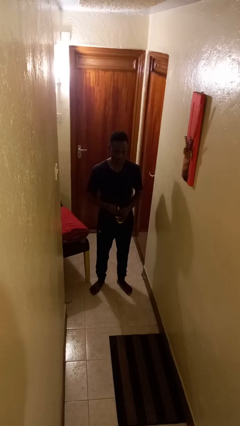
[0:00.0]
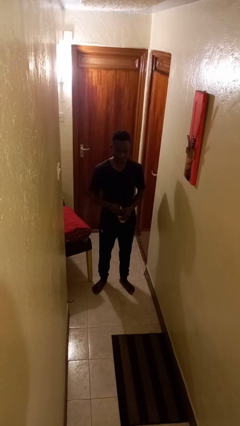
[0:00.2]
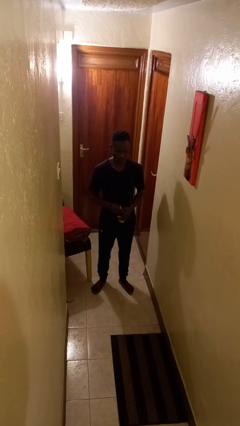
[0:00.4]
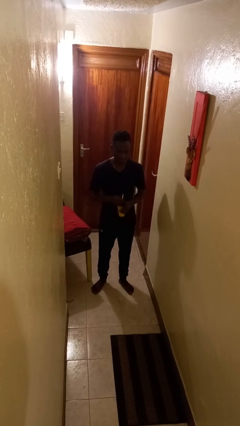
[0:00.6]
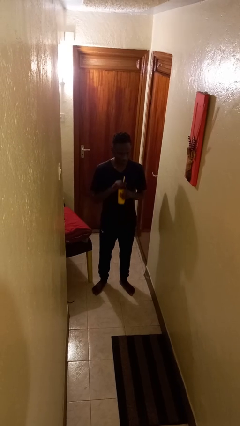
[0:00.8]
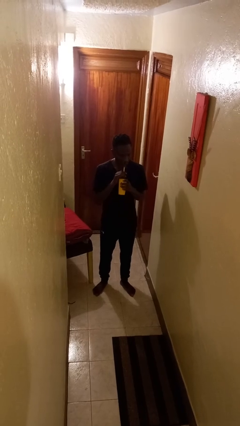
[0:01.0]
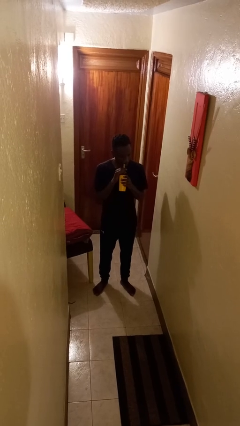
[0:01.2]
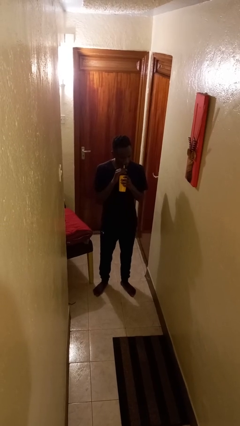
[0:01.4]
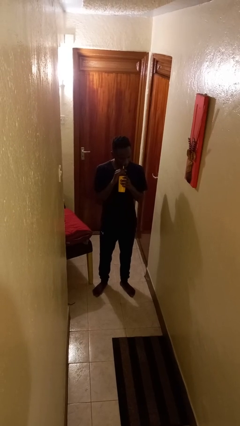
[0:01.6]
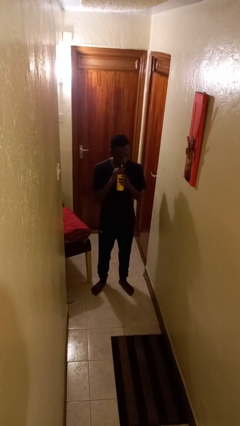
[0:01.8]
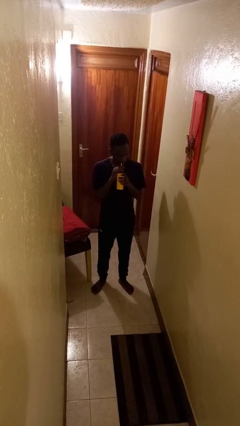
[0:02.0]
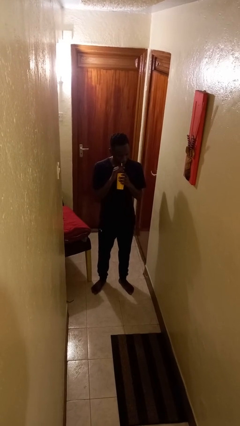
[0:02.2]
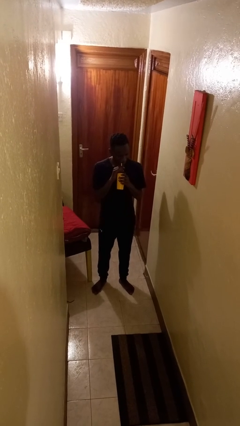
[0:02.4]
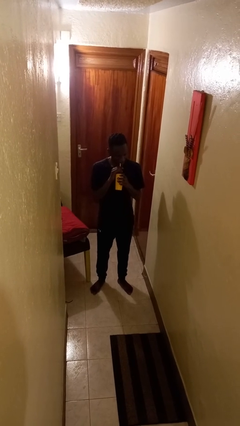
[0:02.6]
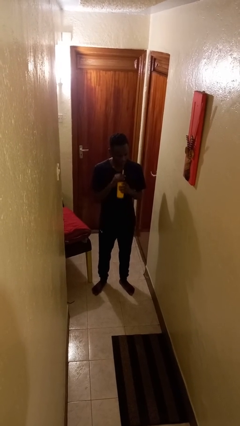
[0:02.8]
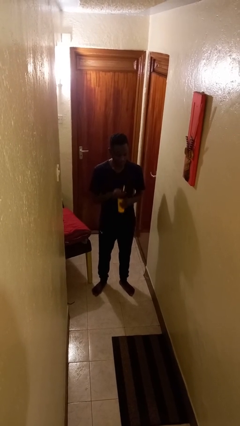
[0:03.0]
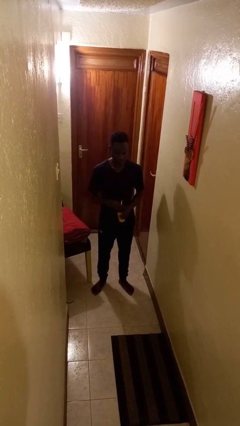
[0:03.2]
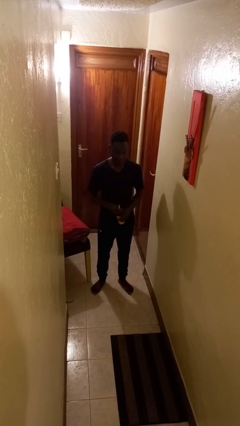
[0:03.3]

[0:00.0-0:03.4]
person drinks from straw

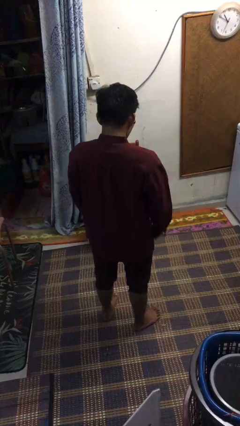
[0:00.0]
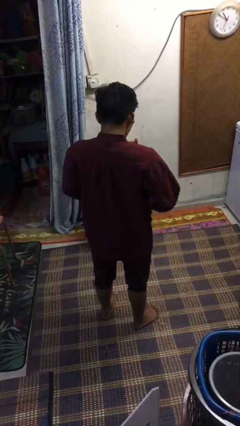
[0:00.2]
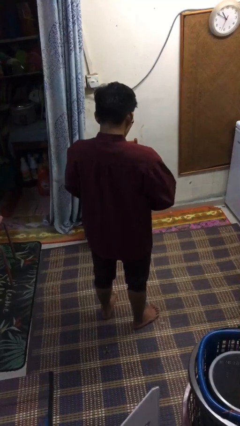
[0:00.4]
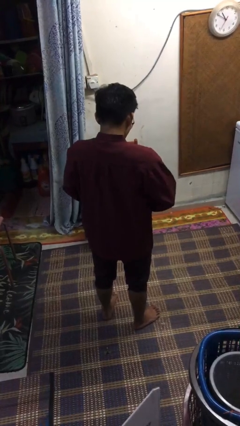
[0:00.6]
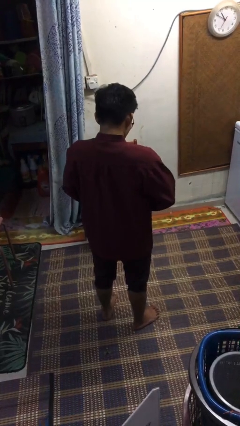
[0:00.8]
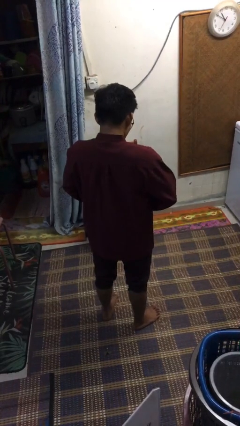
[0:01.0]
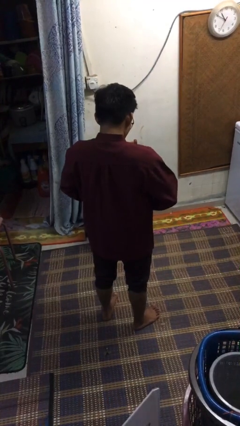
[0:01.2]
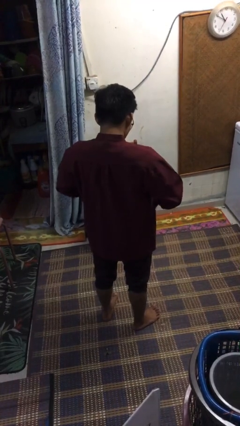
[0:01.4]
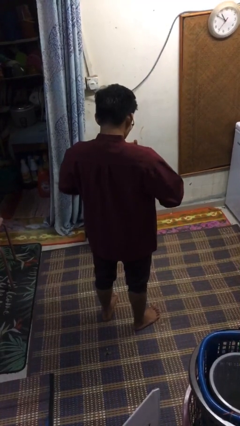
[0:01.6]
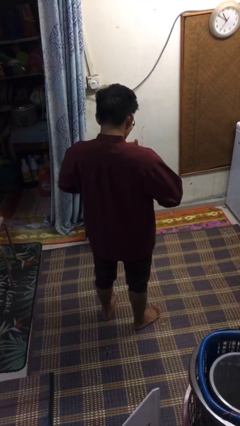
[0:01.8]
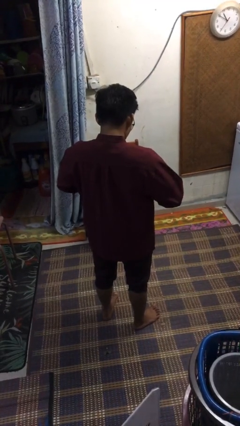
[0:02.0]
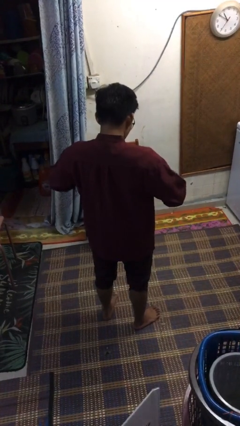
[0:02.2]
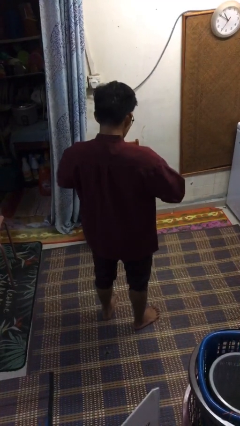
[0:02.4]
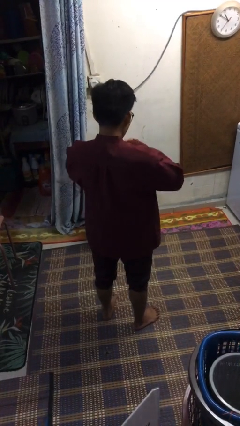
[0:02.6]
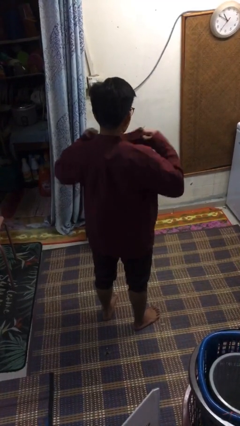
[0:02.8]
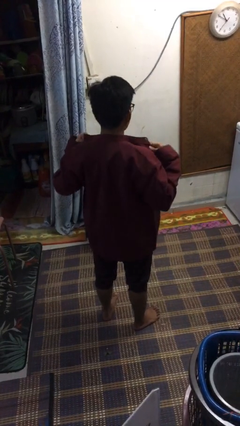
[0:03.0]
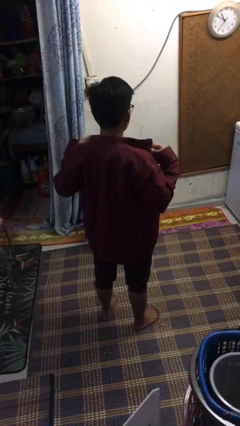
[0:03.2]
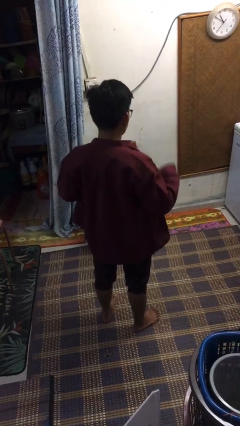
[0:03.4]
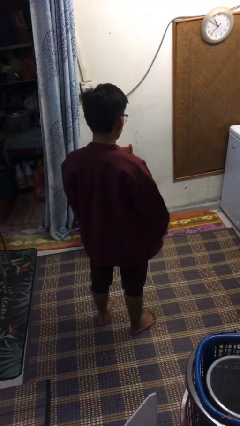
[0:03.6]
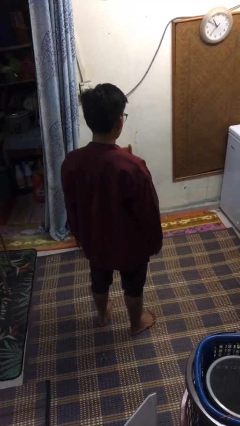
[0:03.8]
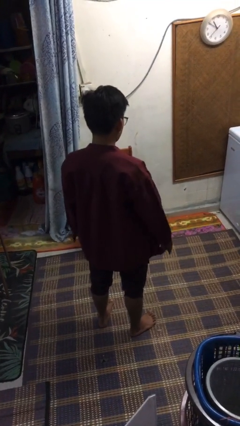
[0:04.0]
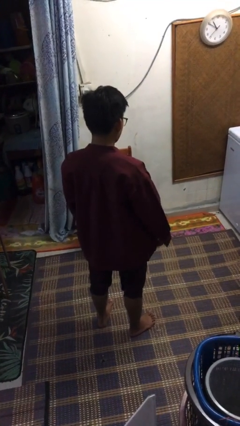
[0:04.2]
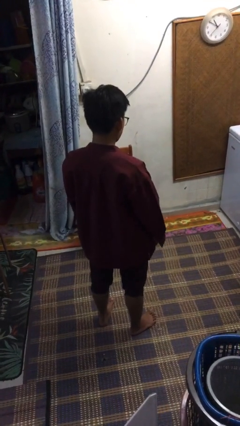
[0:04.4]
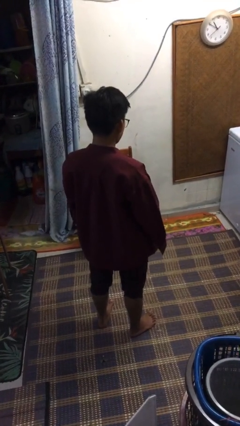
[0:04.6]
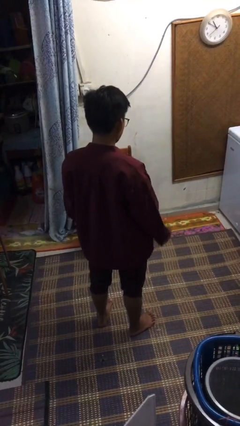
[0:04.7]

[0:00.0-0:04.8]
person unbuttons shirt

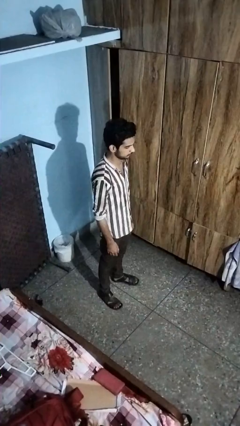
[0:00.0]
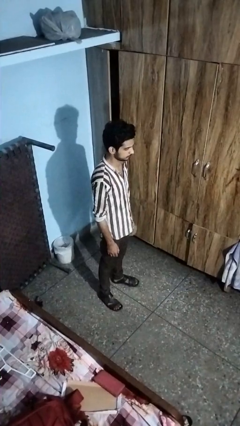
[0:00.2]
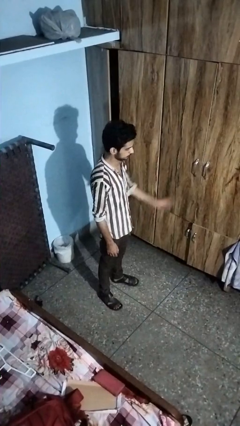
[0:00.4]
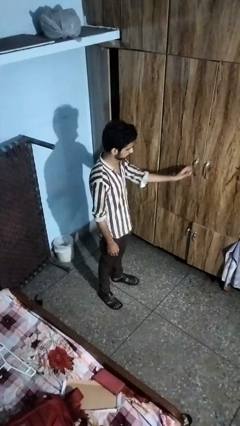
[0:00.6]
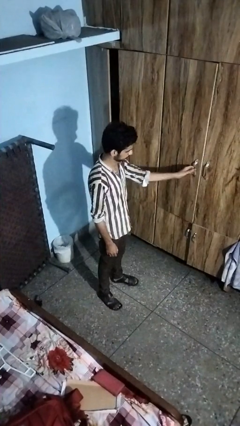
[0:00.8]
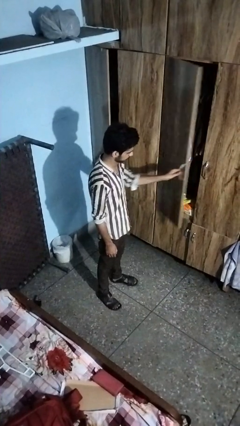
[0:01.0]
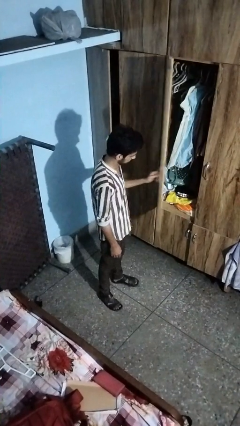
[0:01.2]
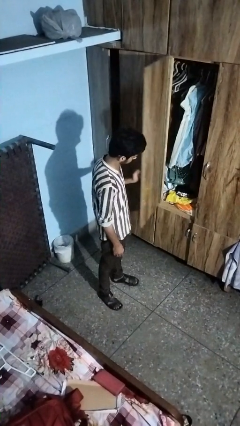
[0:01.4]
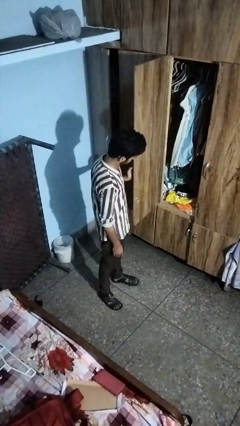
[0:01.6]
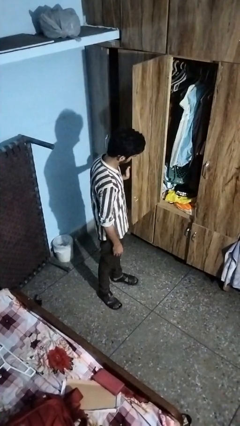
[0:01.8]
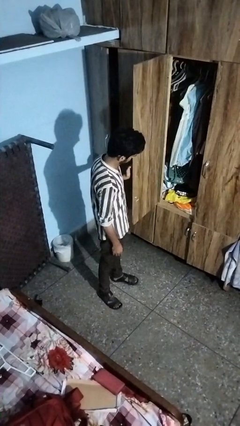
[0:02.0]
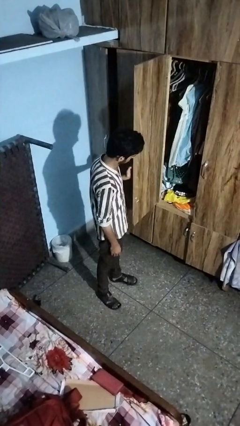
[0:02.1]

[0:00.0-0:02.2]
person opens closet door

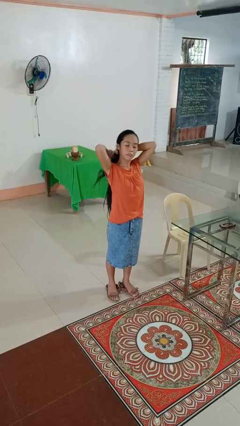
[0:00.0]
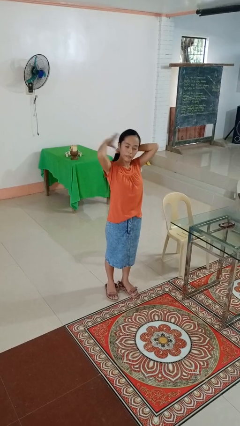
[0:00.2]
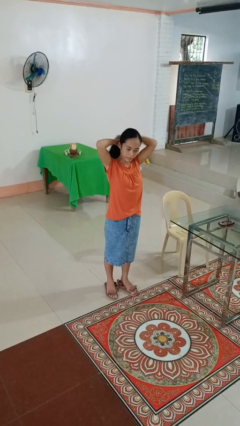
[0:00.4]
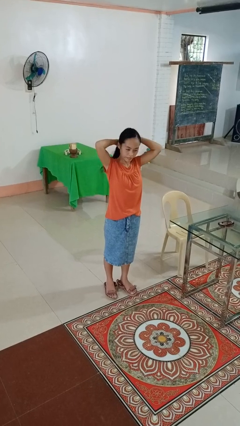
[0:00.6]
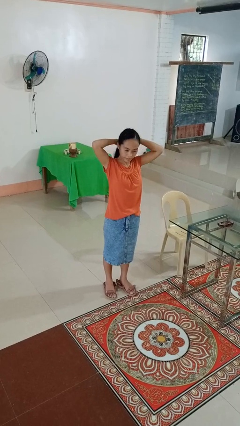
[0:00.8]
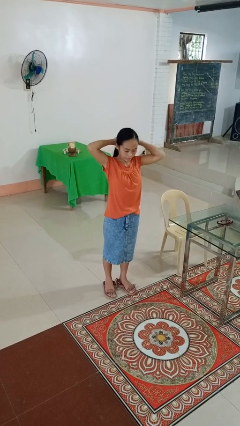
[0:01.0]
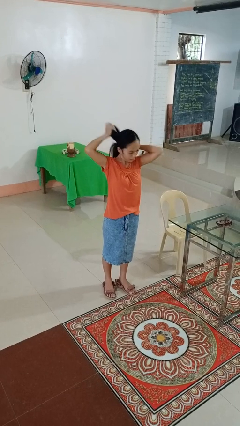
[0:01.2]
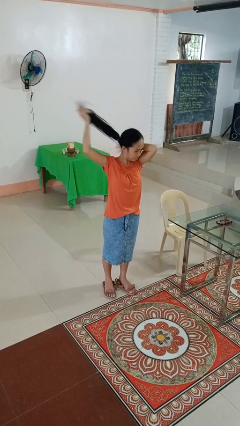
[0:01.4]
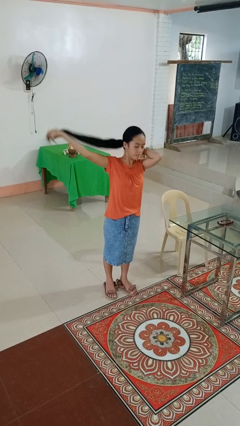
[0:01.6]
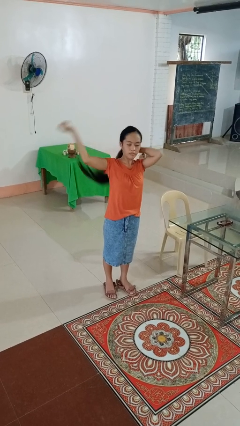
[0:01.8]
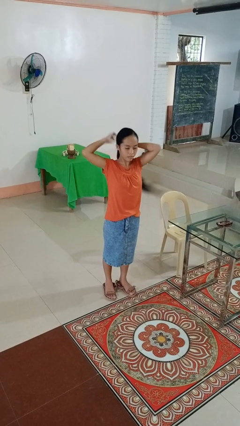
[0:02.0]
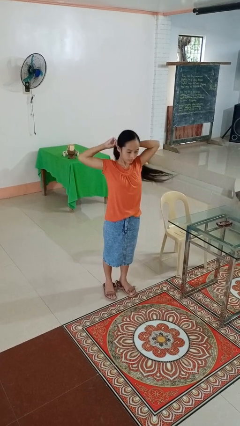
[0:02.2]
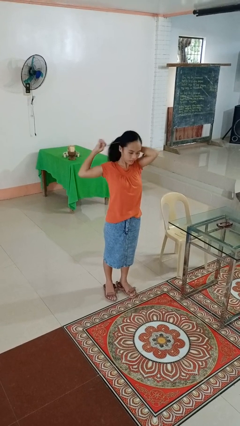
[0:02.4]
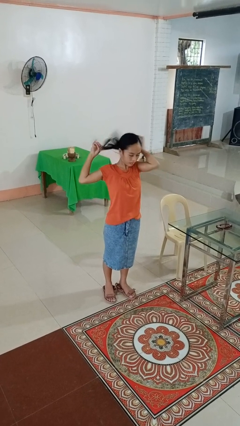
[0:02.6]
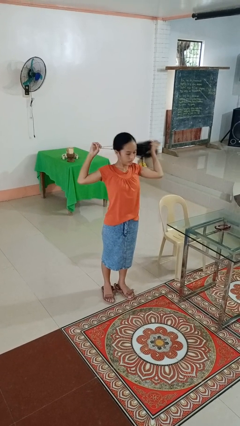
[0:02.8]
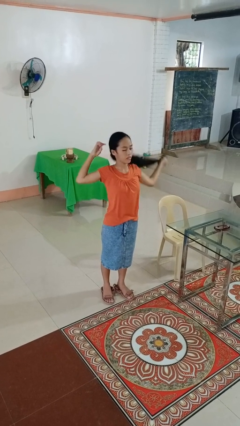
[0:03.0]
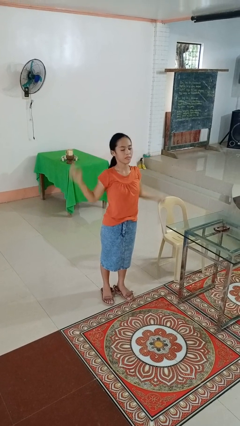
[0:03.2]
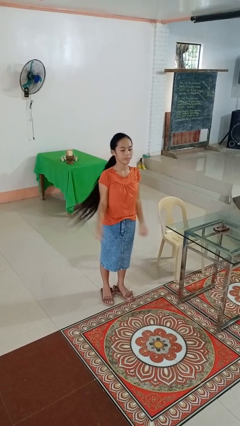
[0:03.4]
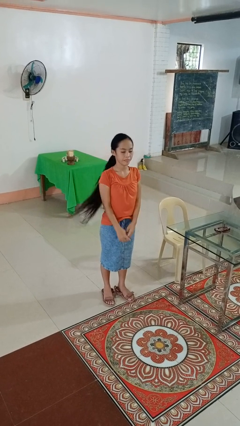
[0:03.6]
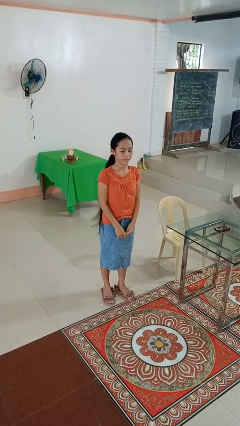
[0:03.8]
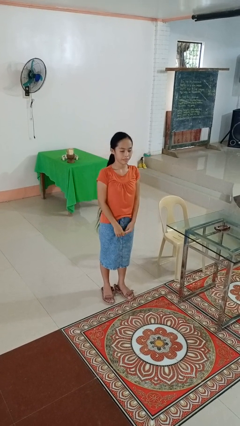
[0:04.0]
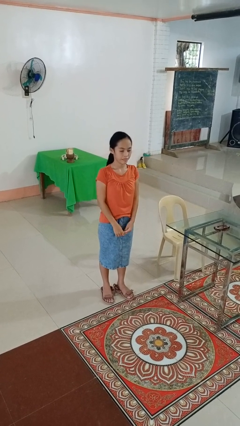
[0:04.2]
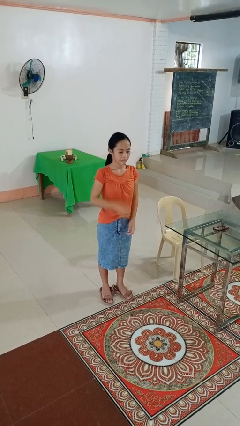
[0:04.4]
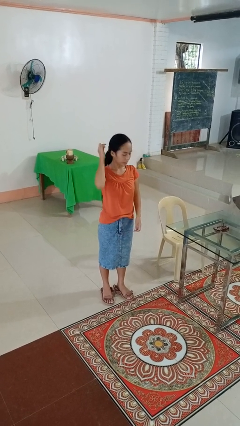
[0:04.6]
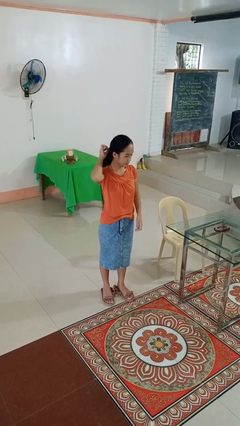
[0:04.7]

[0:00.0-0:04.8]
person puts hair in ponytail

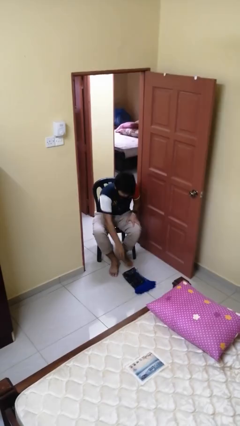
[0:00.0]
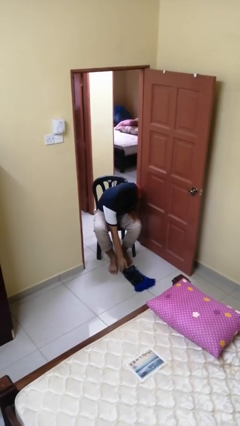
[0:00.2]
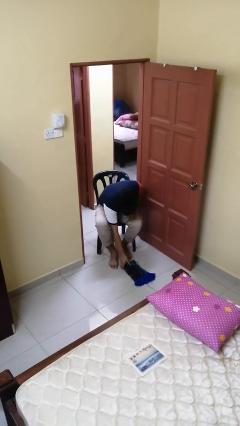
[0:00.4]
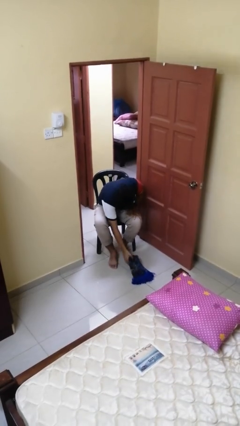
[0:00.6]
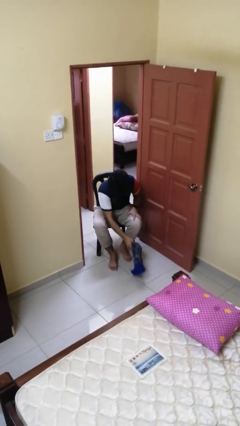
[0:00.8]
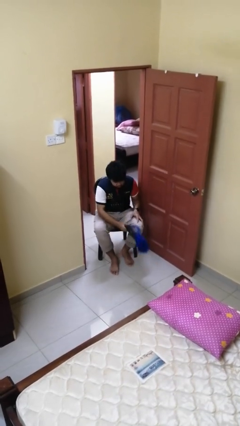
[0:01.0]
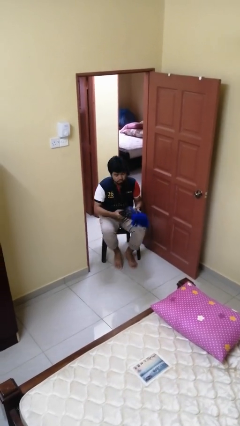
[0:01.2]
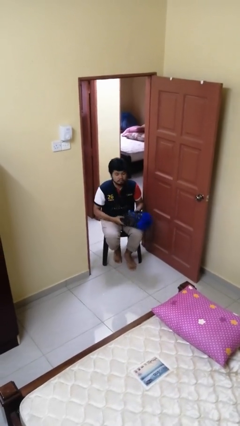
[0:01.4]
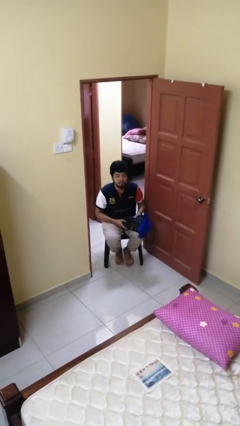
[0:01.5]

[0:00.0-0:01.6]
person picks up object from floor

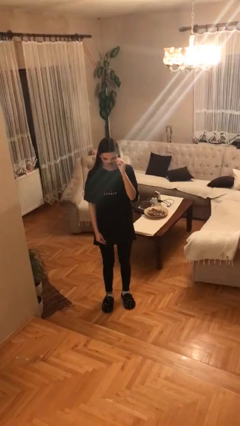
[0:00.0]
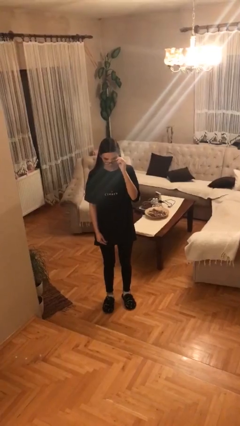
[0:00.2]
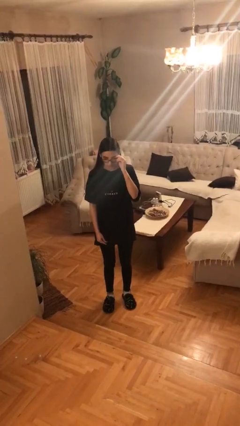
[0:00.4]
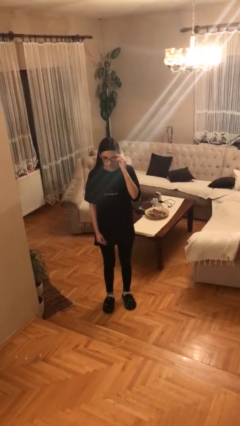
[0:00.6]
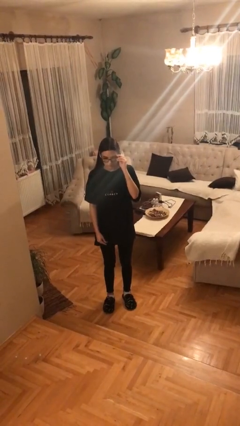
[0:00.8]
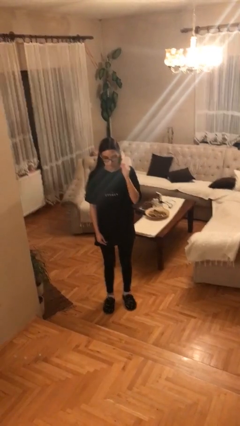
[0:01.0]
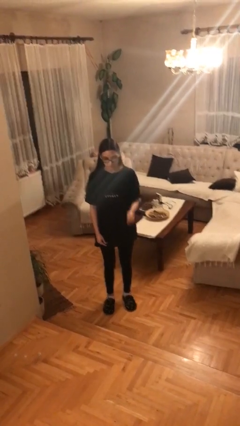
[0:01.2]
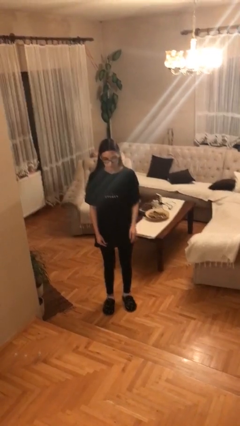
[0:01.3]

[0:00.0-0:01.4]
person puts on glasses
